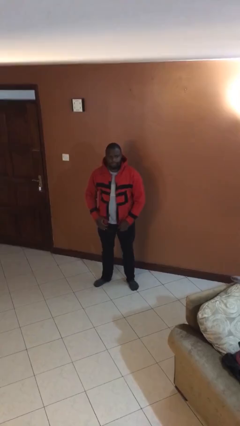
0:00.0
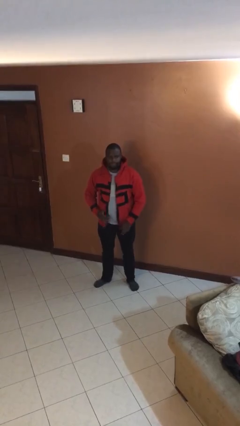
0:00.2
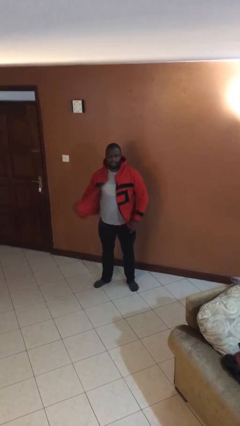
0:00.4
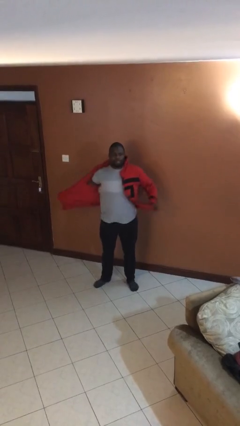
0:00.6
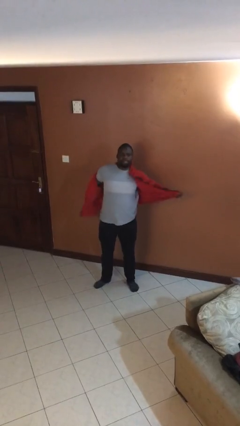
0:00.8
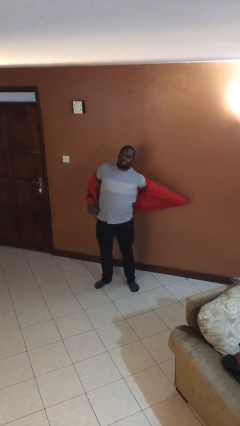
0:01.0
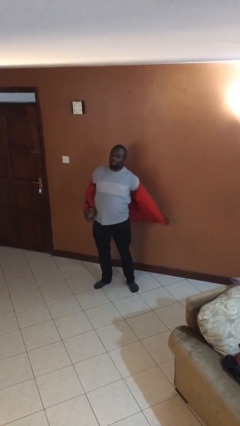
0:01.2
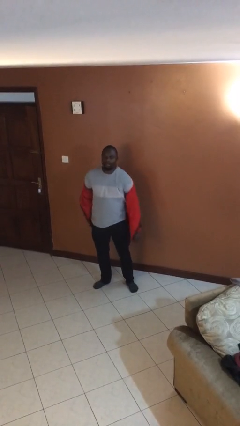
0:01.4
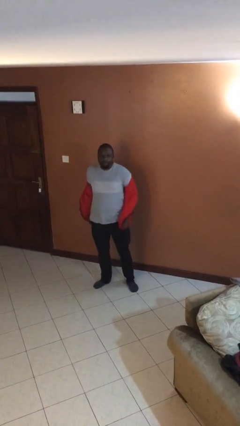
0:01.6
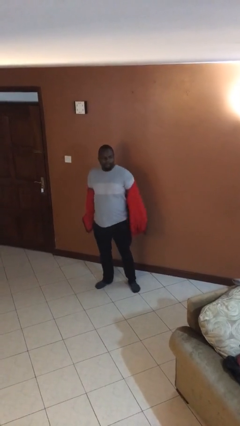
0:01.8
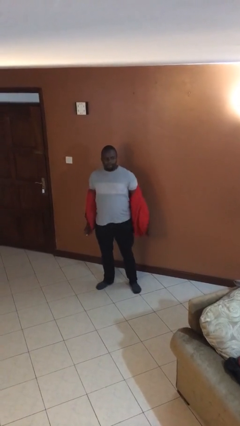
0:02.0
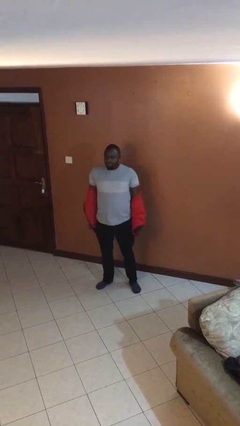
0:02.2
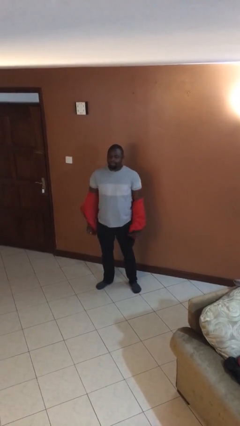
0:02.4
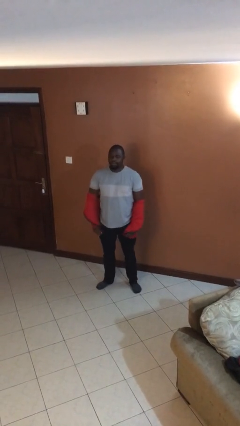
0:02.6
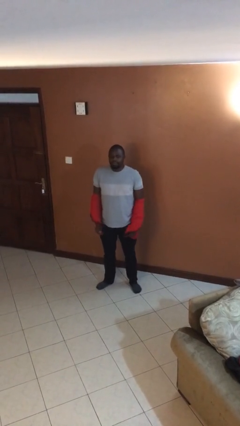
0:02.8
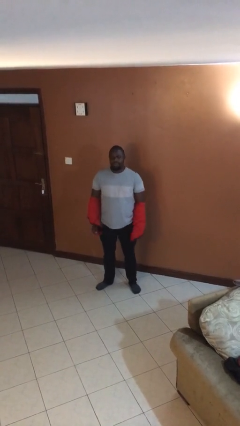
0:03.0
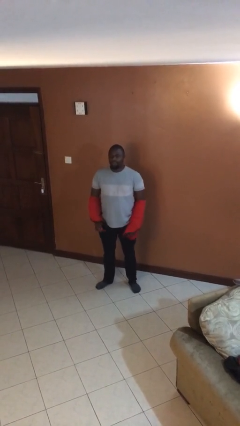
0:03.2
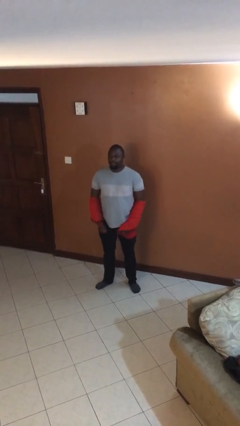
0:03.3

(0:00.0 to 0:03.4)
person takes off jacket

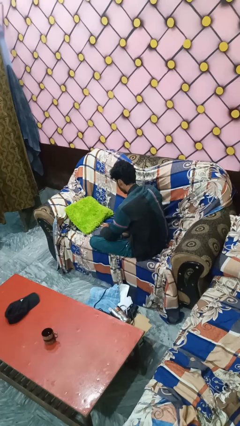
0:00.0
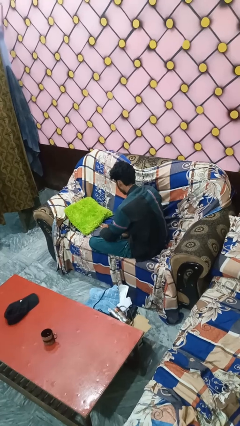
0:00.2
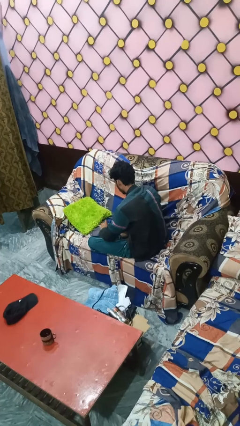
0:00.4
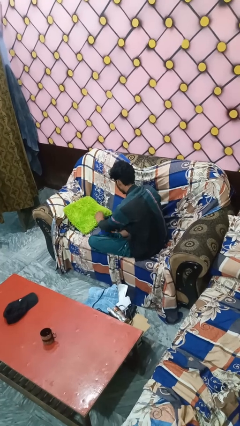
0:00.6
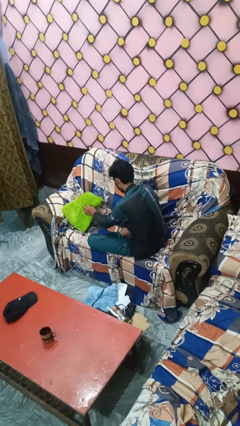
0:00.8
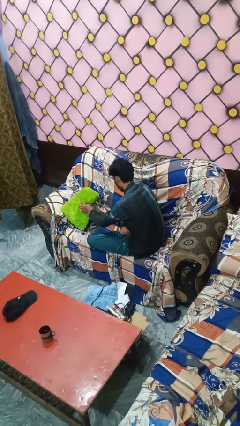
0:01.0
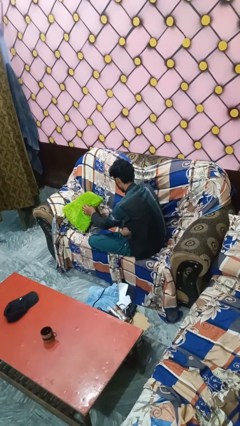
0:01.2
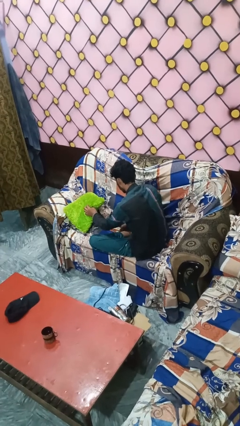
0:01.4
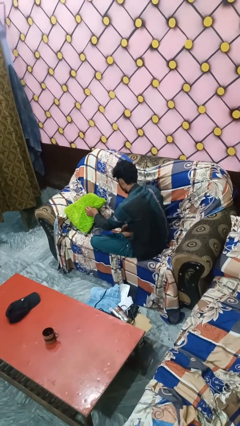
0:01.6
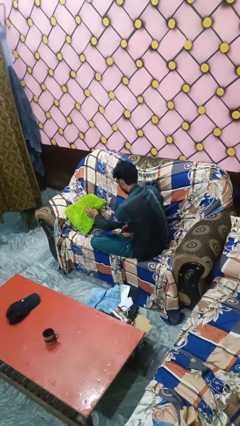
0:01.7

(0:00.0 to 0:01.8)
person searches under couch

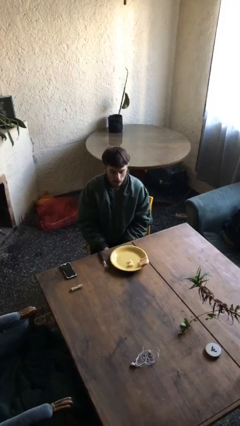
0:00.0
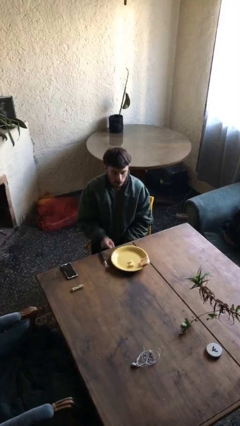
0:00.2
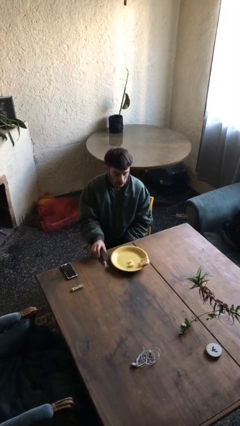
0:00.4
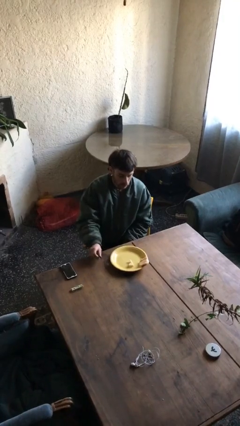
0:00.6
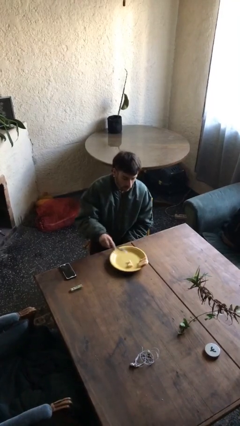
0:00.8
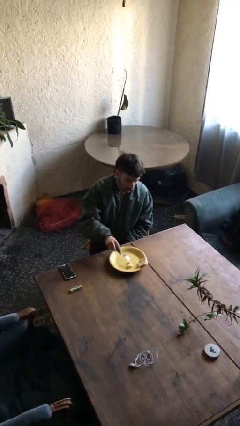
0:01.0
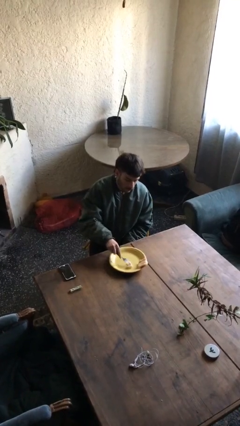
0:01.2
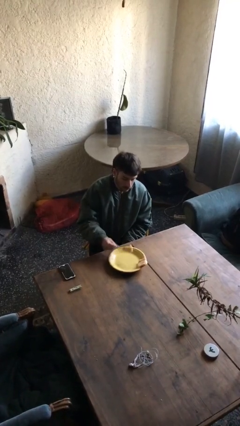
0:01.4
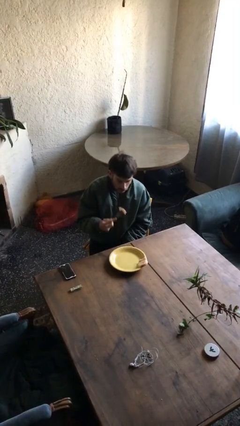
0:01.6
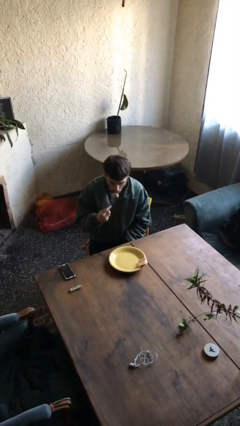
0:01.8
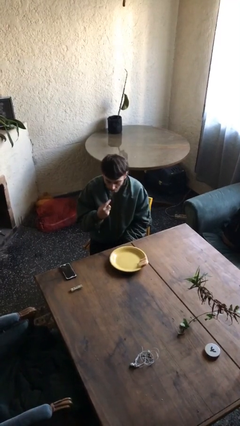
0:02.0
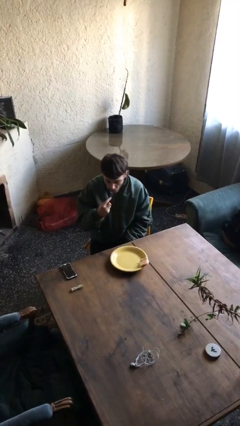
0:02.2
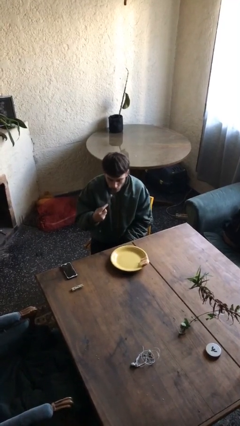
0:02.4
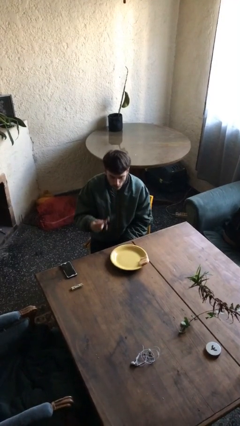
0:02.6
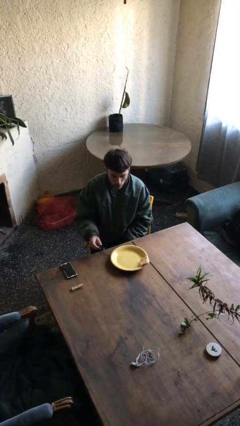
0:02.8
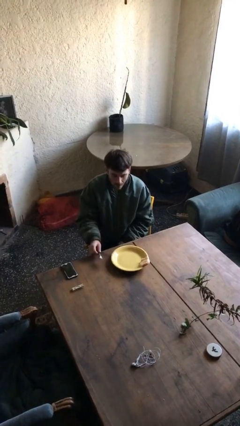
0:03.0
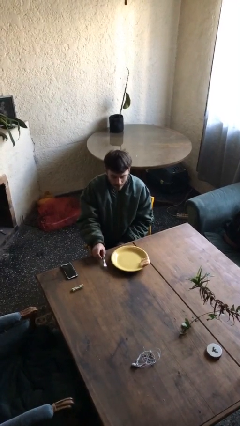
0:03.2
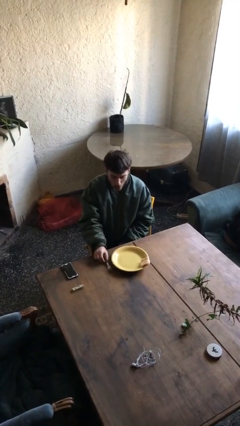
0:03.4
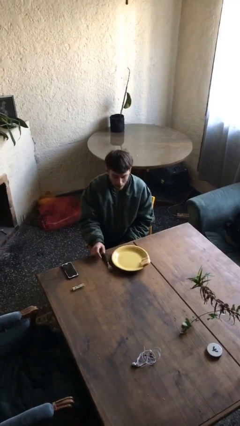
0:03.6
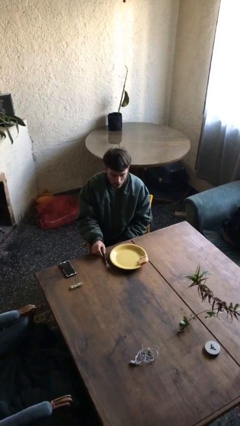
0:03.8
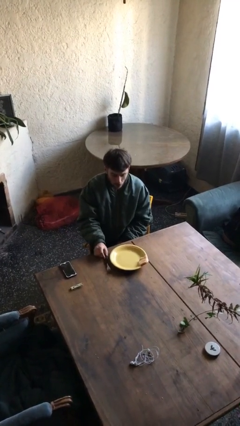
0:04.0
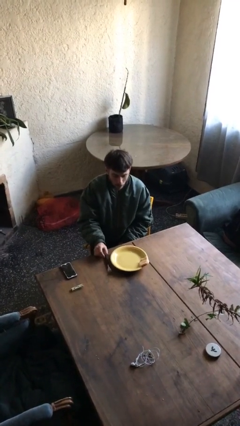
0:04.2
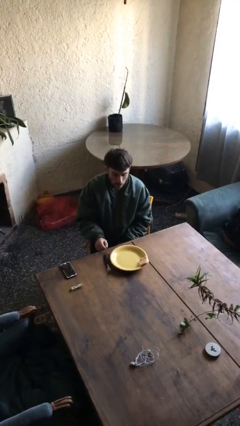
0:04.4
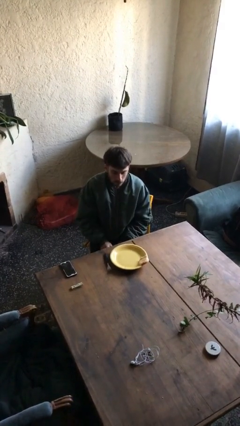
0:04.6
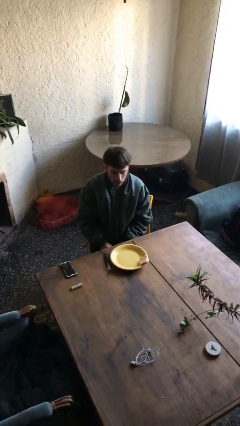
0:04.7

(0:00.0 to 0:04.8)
person eats with utensil

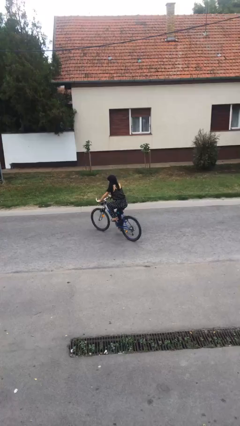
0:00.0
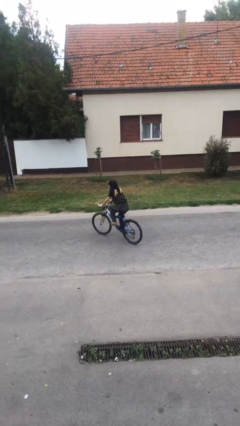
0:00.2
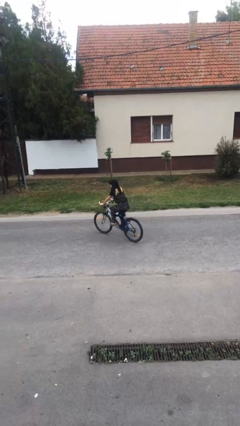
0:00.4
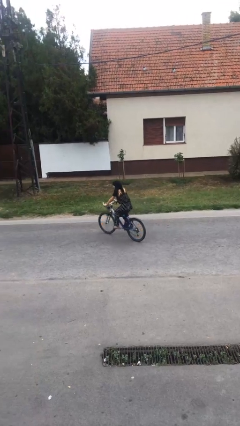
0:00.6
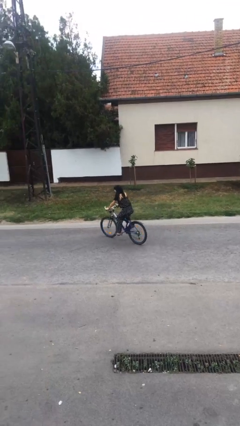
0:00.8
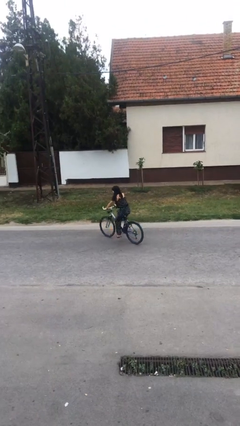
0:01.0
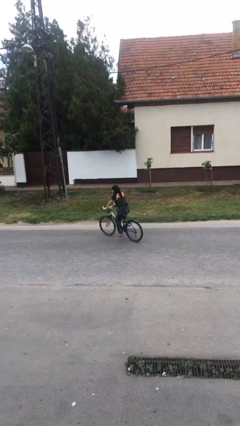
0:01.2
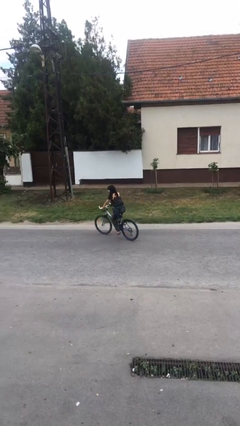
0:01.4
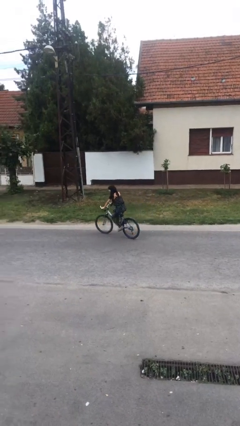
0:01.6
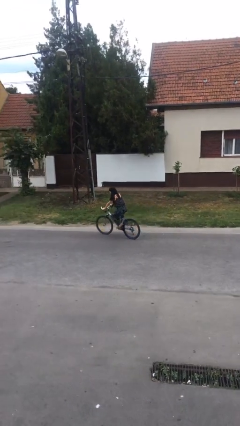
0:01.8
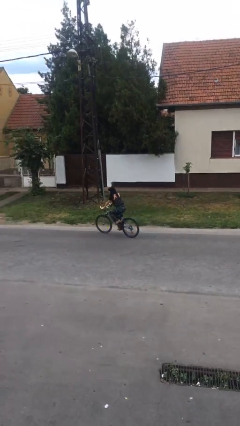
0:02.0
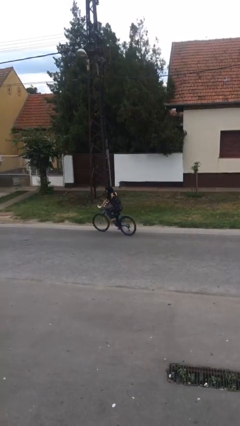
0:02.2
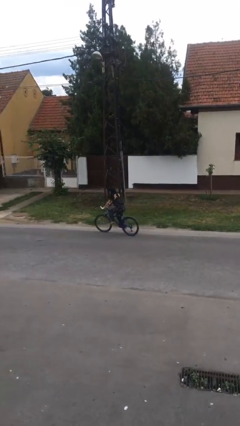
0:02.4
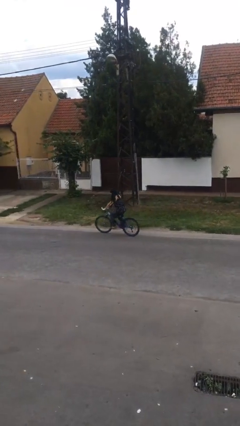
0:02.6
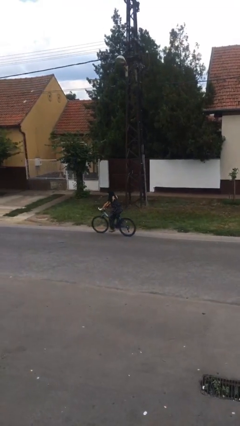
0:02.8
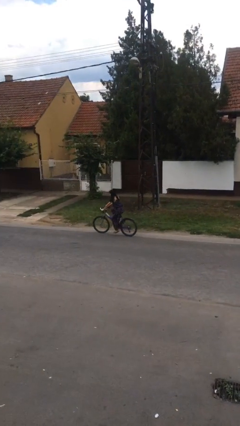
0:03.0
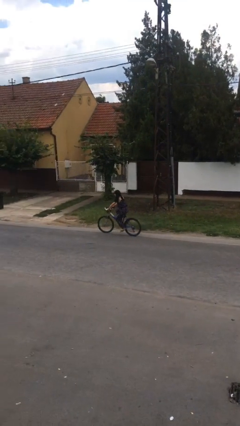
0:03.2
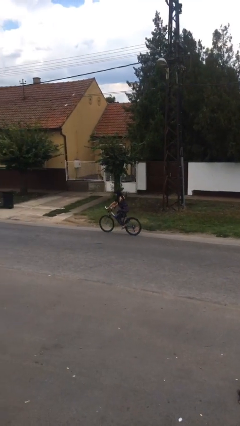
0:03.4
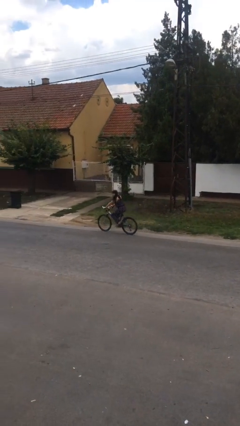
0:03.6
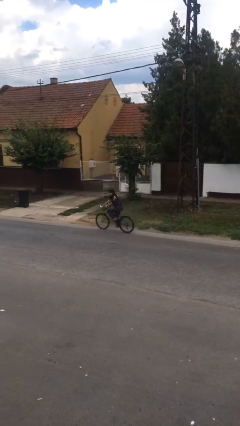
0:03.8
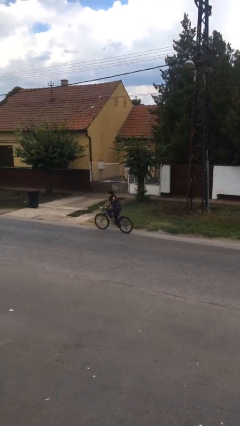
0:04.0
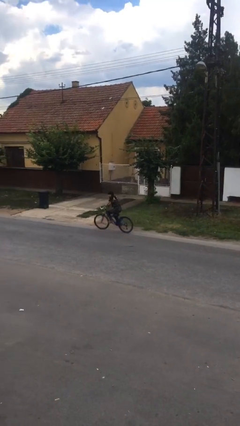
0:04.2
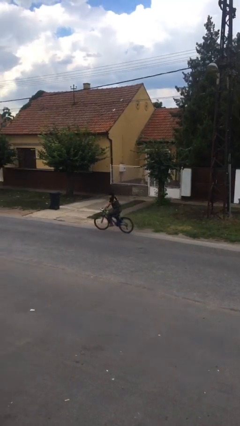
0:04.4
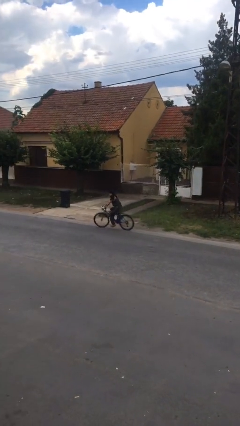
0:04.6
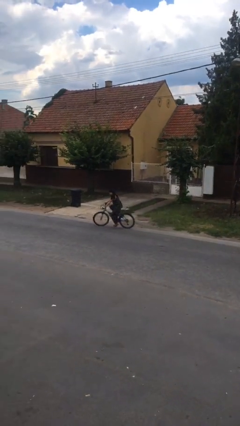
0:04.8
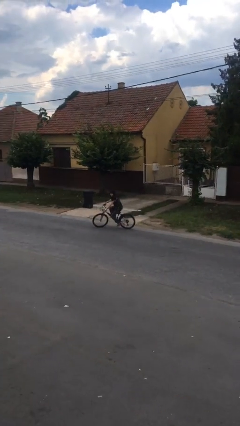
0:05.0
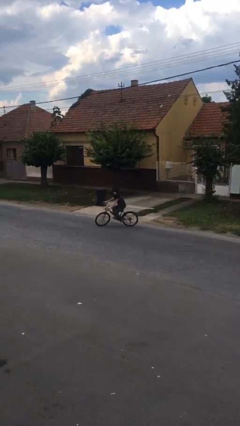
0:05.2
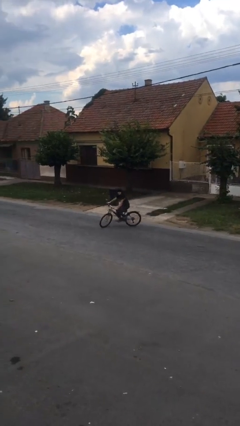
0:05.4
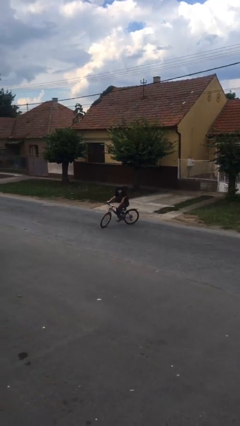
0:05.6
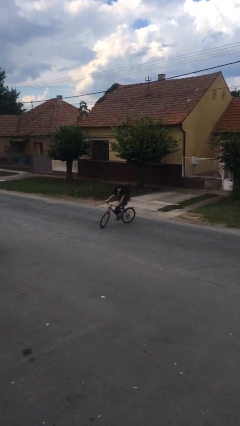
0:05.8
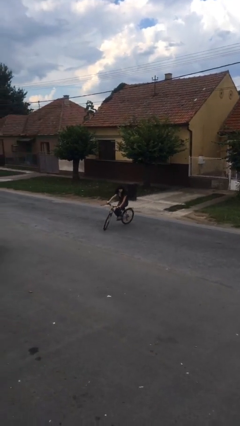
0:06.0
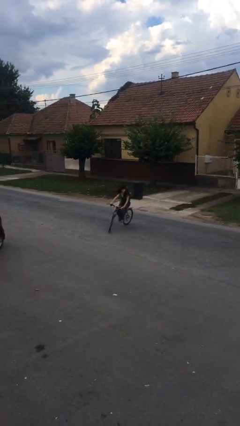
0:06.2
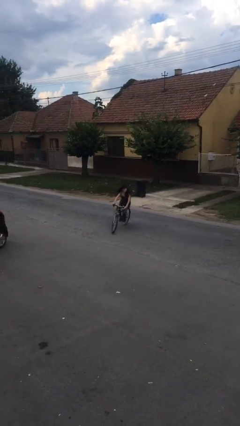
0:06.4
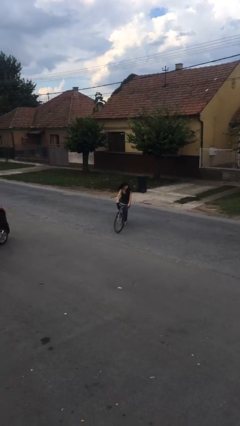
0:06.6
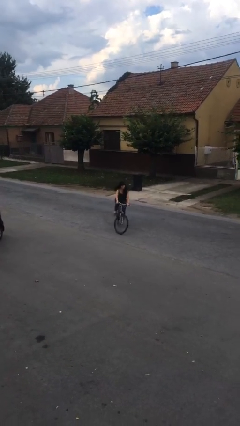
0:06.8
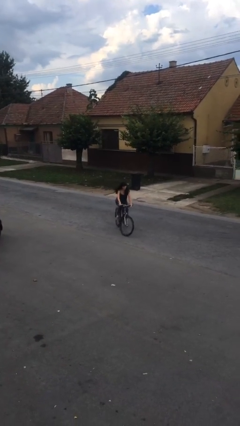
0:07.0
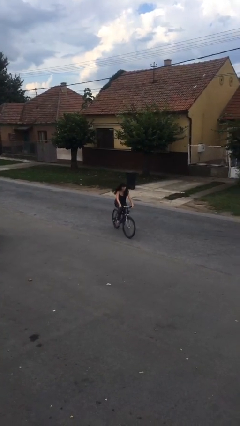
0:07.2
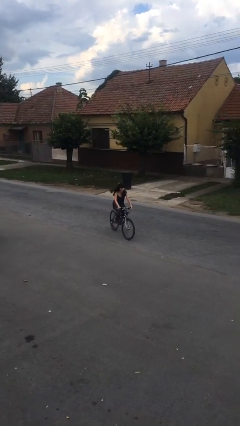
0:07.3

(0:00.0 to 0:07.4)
person rides bicycle

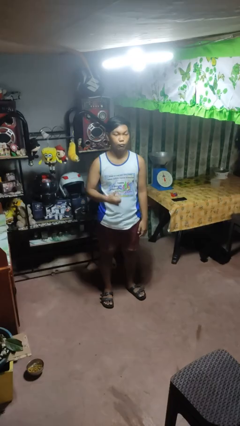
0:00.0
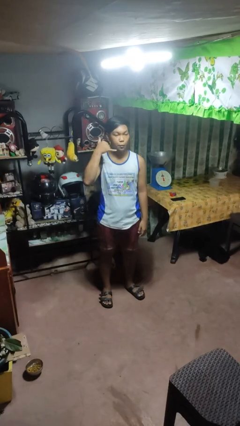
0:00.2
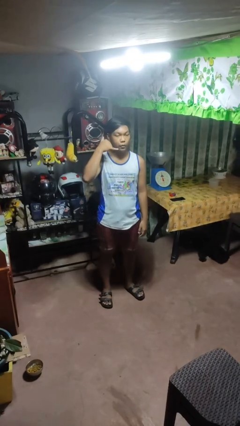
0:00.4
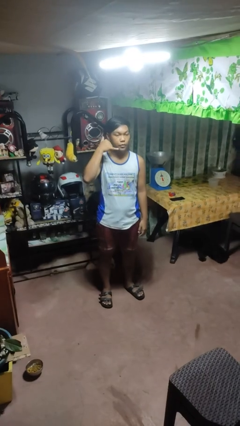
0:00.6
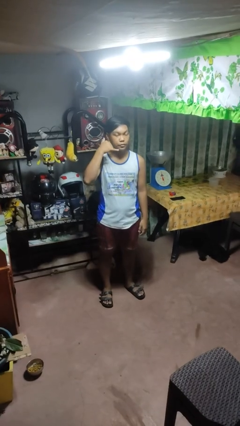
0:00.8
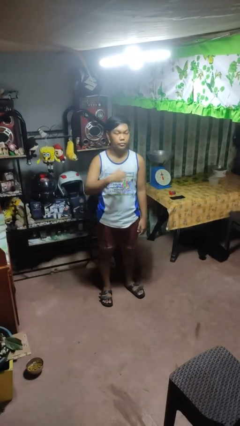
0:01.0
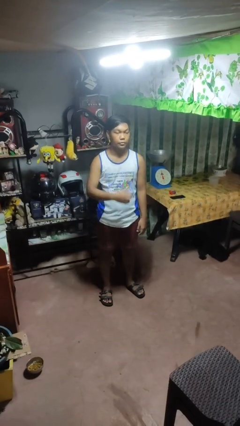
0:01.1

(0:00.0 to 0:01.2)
person gestures call me
